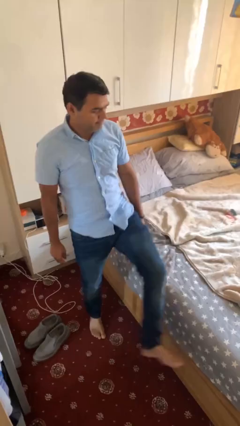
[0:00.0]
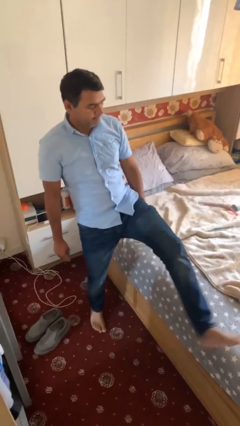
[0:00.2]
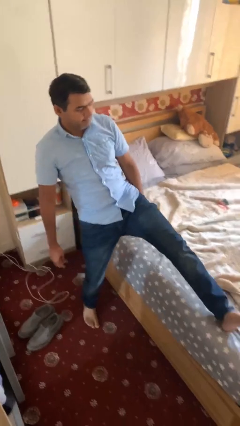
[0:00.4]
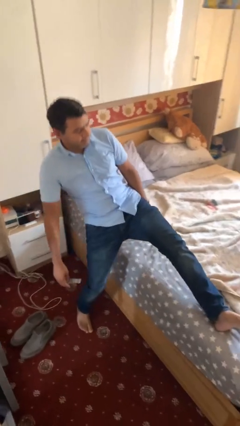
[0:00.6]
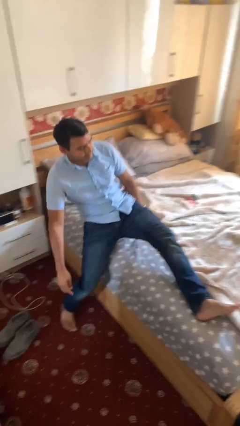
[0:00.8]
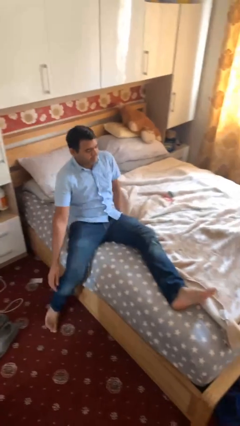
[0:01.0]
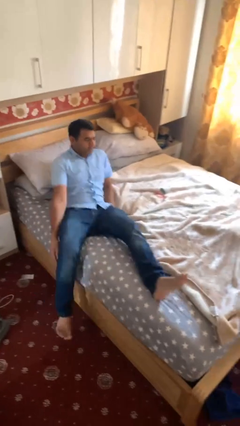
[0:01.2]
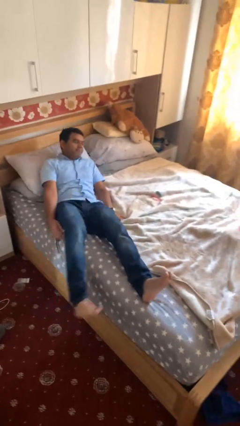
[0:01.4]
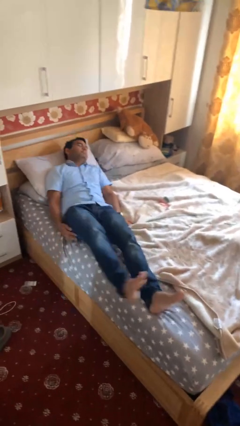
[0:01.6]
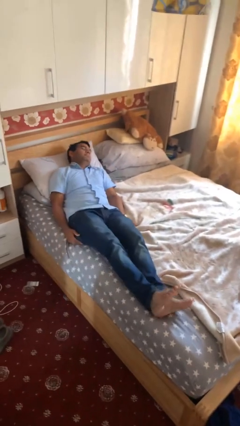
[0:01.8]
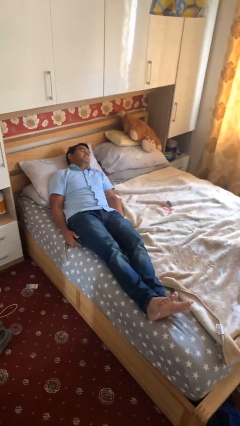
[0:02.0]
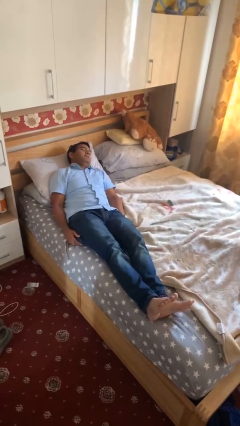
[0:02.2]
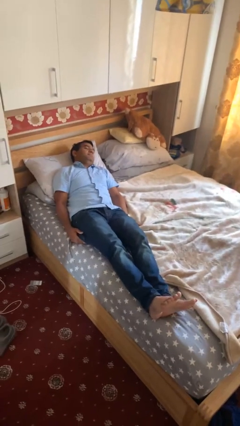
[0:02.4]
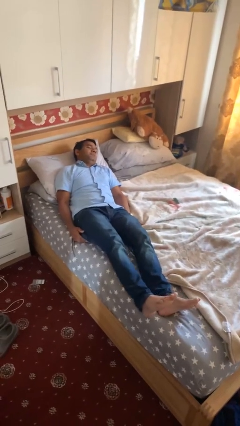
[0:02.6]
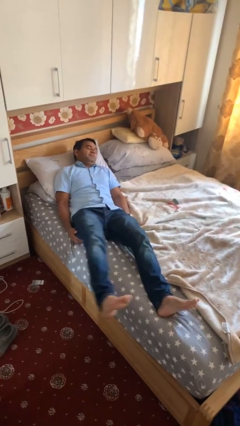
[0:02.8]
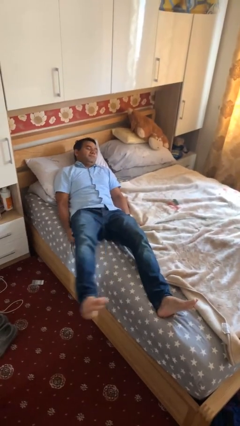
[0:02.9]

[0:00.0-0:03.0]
person lies down on bed

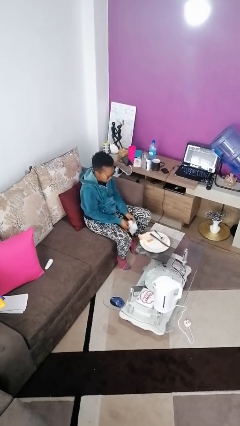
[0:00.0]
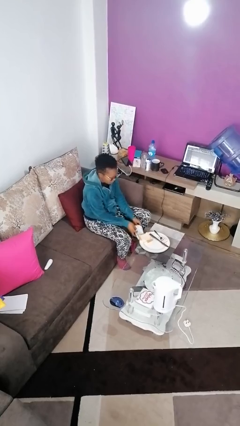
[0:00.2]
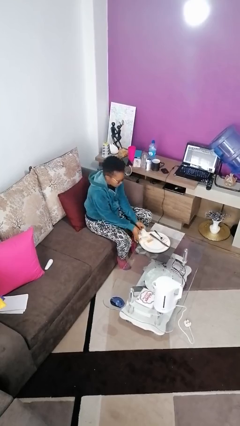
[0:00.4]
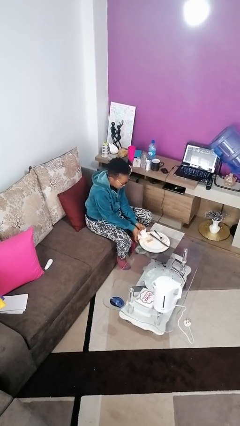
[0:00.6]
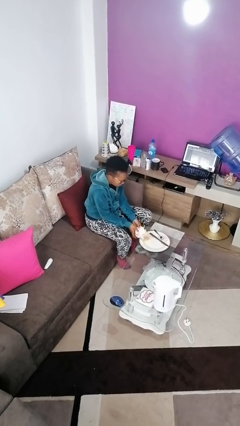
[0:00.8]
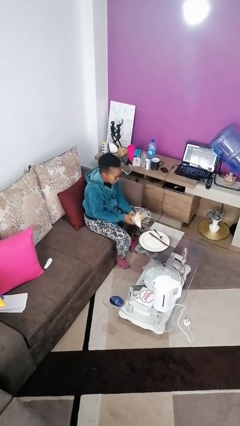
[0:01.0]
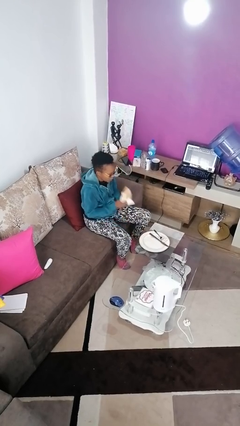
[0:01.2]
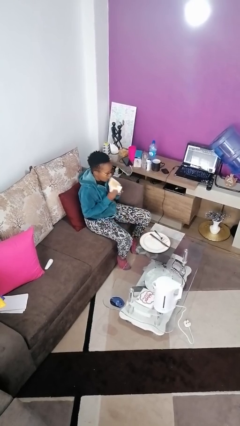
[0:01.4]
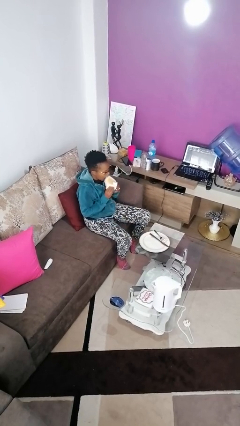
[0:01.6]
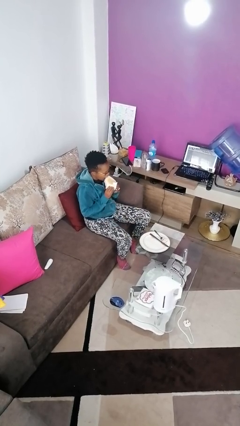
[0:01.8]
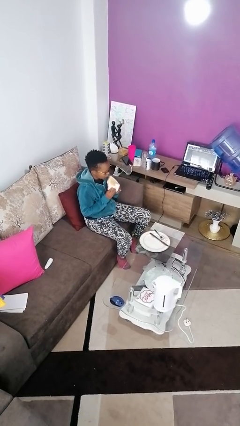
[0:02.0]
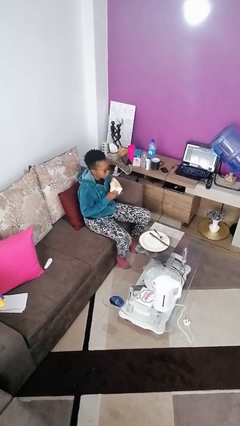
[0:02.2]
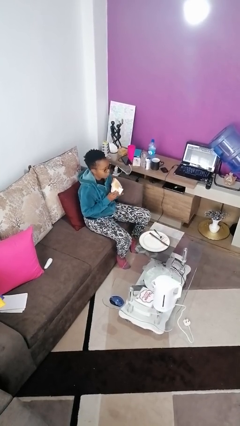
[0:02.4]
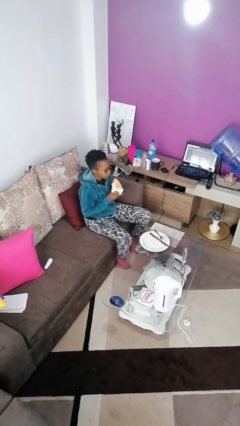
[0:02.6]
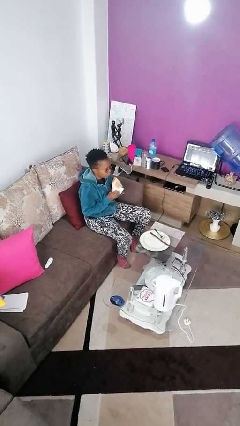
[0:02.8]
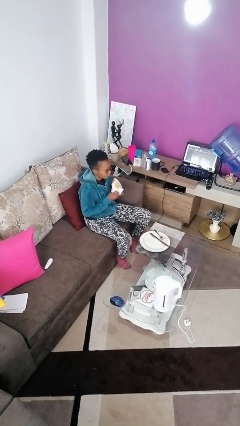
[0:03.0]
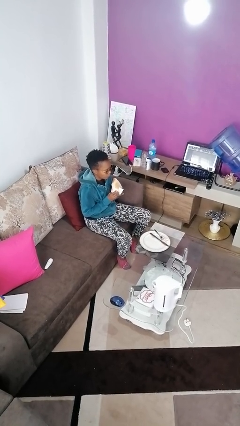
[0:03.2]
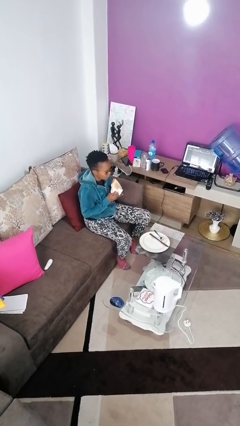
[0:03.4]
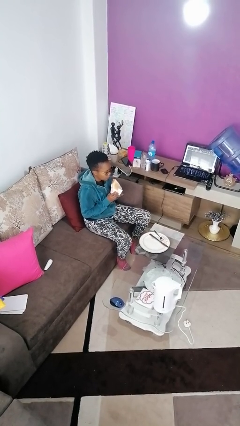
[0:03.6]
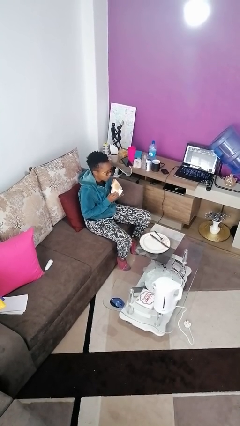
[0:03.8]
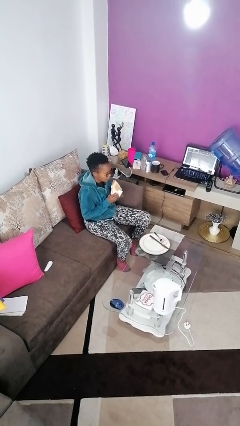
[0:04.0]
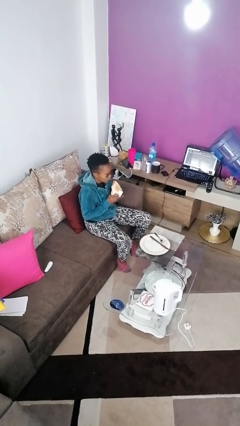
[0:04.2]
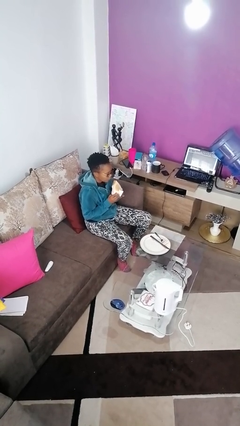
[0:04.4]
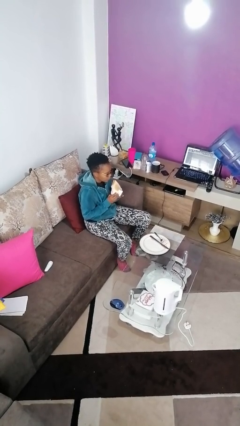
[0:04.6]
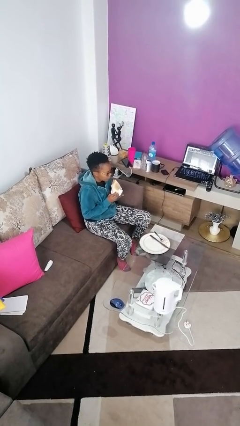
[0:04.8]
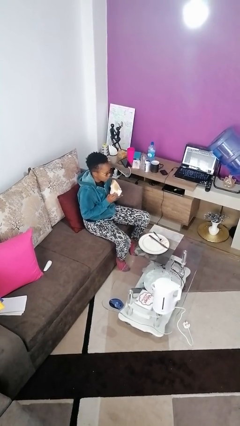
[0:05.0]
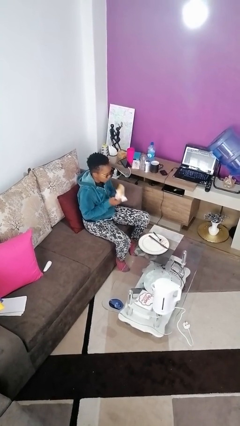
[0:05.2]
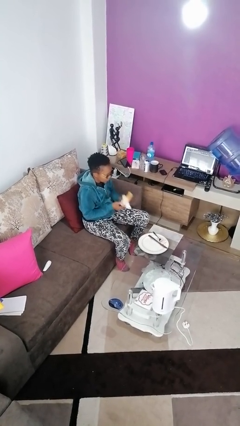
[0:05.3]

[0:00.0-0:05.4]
person eats with hands

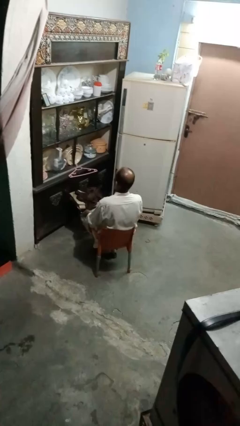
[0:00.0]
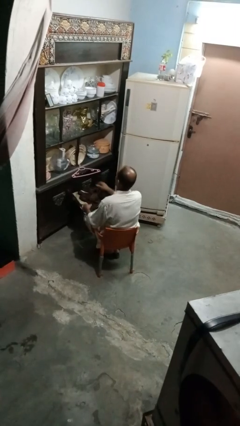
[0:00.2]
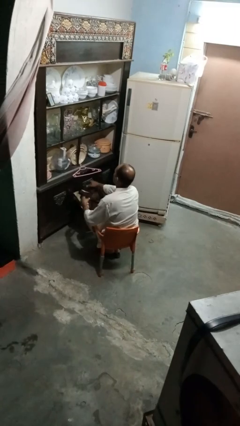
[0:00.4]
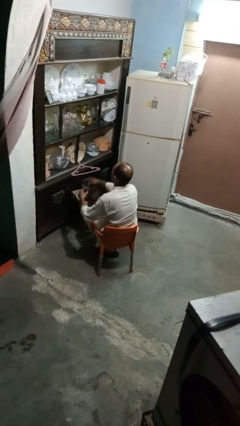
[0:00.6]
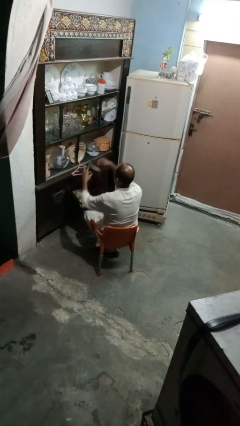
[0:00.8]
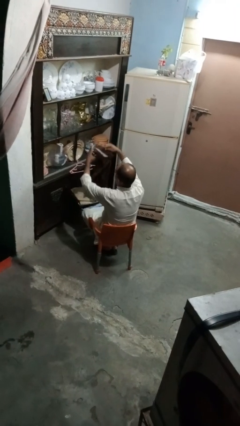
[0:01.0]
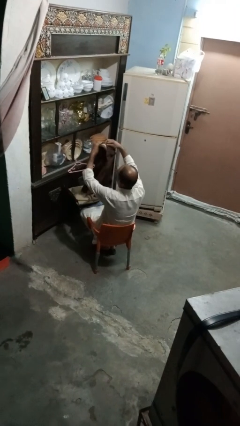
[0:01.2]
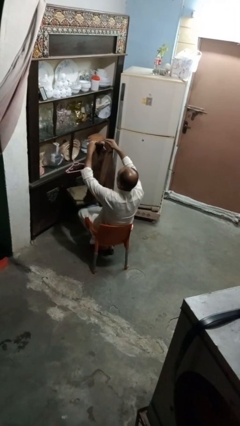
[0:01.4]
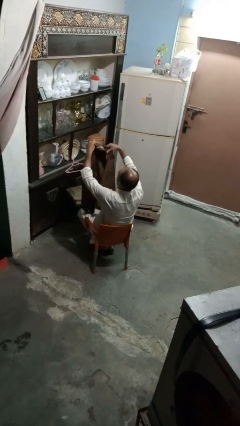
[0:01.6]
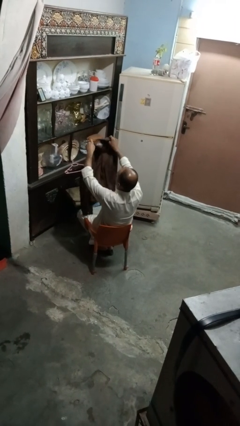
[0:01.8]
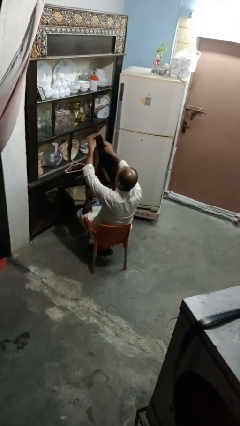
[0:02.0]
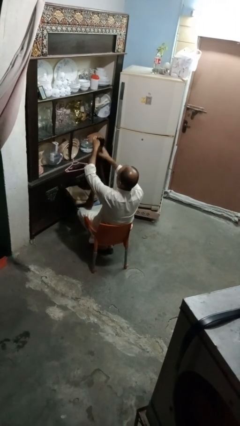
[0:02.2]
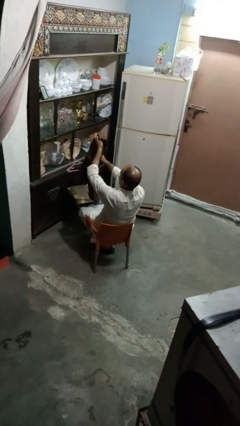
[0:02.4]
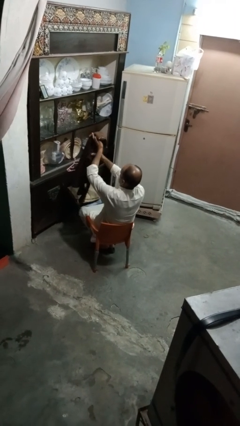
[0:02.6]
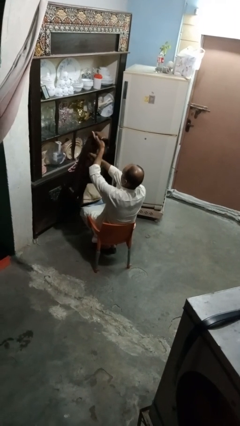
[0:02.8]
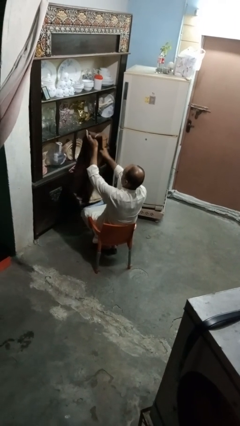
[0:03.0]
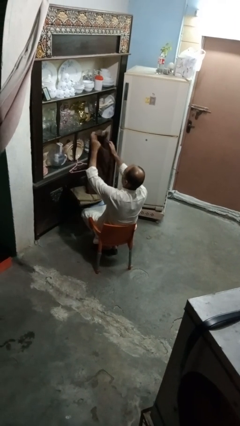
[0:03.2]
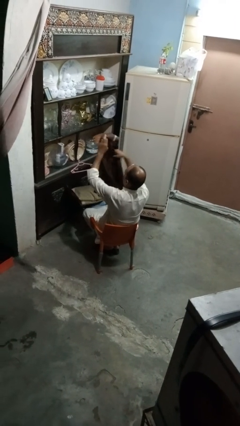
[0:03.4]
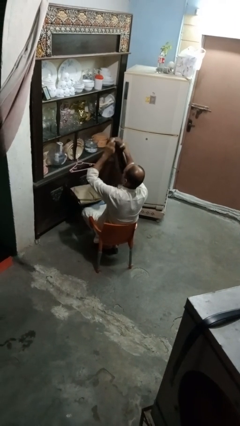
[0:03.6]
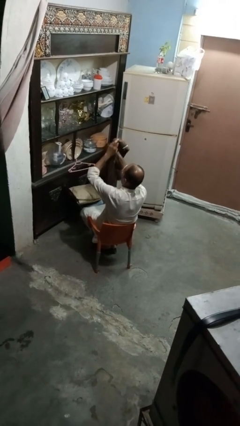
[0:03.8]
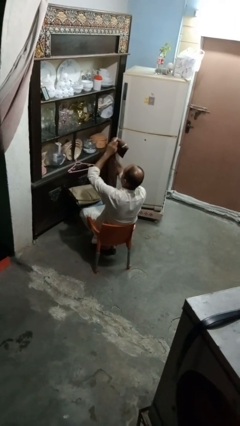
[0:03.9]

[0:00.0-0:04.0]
person folds shirt

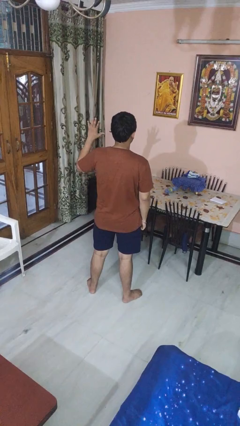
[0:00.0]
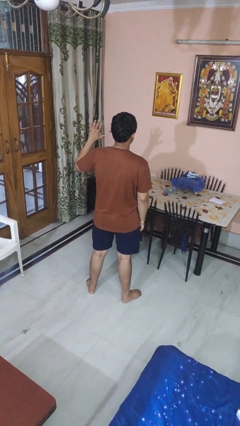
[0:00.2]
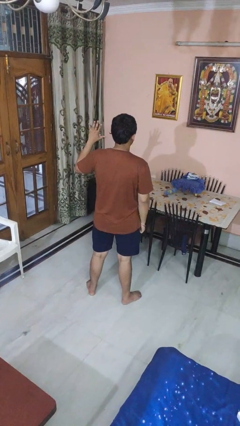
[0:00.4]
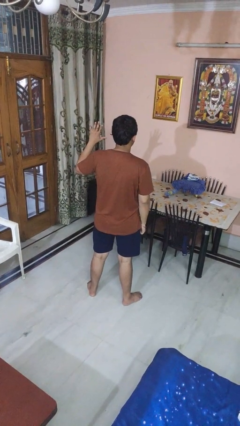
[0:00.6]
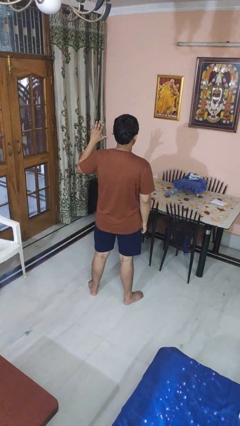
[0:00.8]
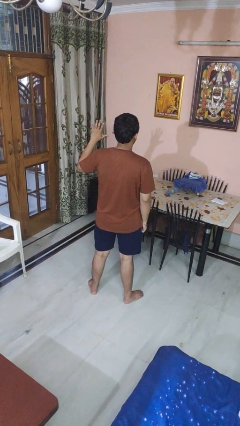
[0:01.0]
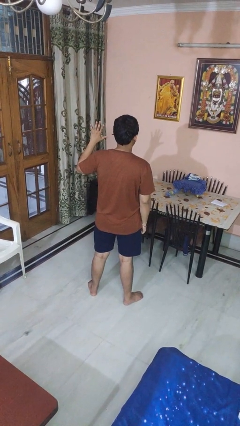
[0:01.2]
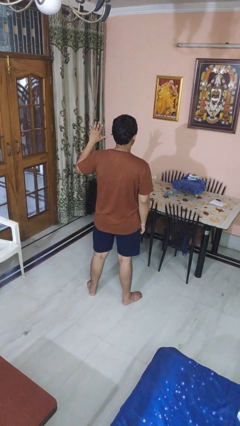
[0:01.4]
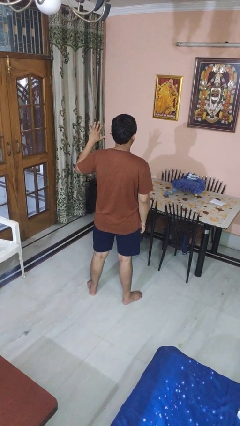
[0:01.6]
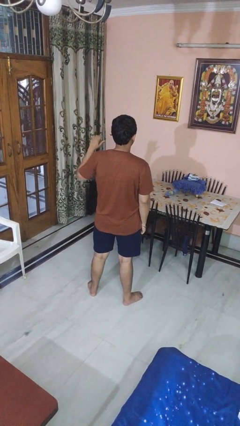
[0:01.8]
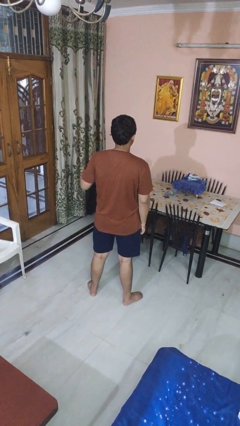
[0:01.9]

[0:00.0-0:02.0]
person gestures number five

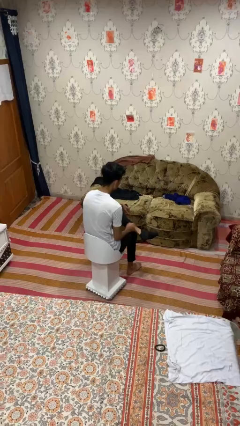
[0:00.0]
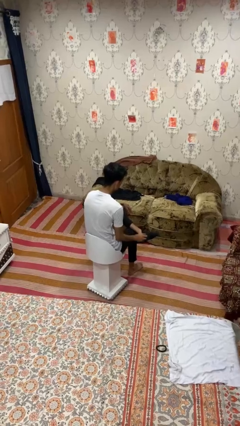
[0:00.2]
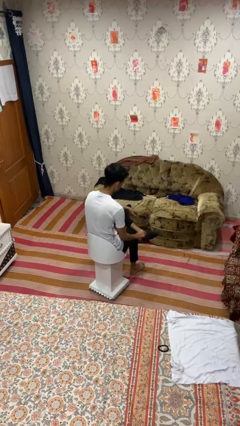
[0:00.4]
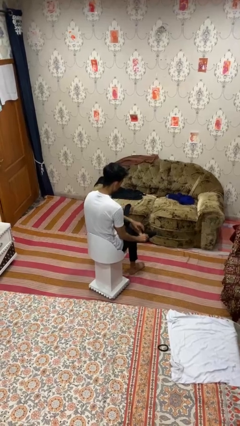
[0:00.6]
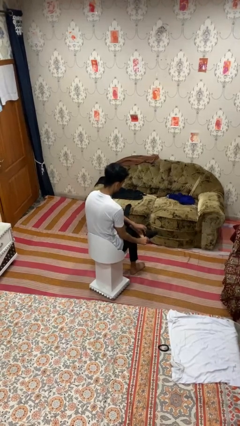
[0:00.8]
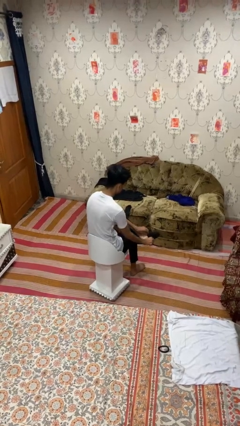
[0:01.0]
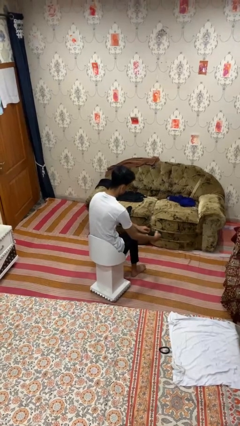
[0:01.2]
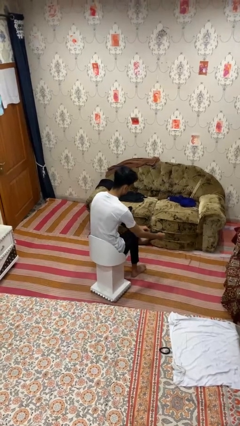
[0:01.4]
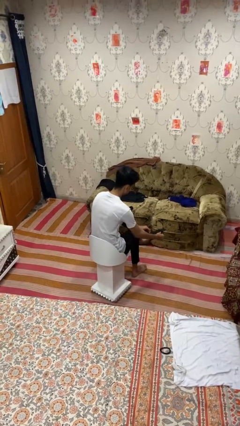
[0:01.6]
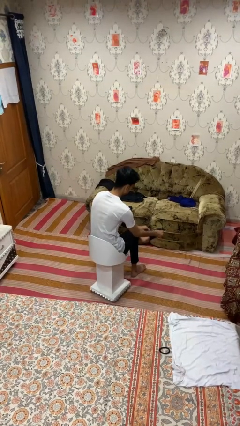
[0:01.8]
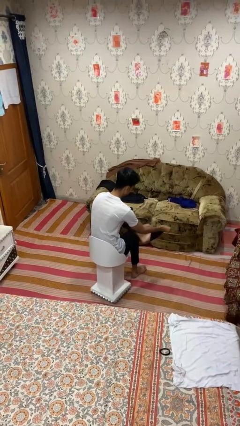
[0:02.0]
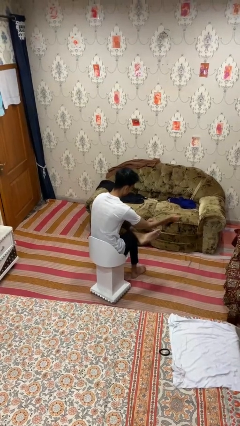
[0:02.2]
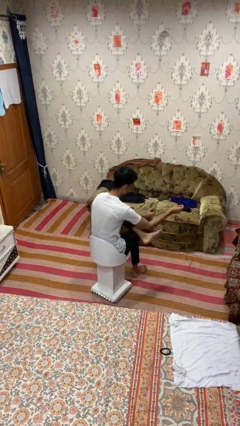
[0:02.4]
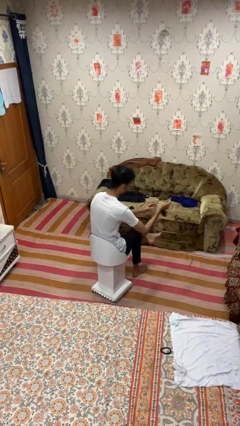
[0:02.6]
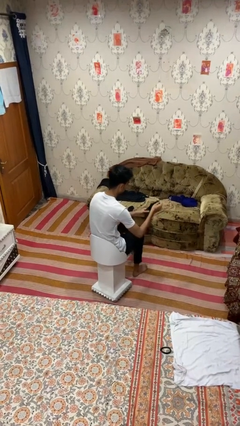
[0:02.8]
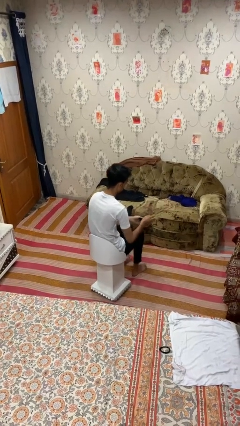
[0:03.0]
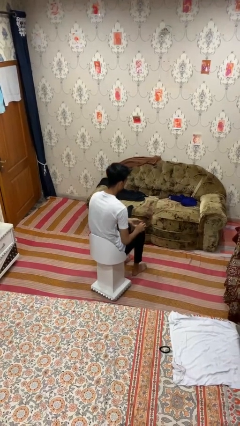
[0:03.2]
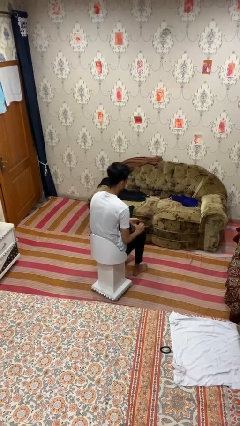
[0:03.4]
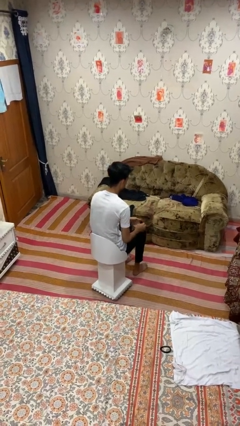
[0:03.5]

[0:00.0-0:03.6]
person takes off socks
